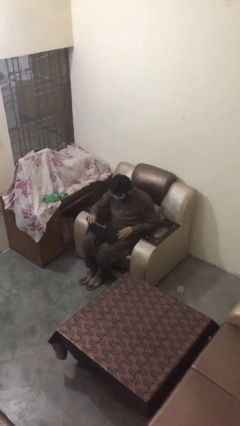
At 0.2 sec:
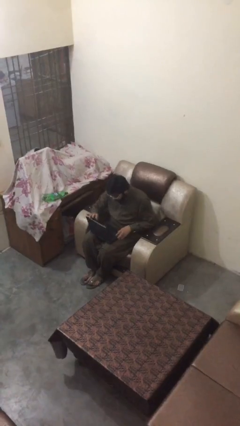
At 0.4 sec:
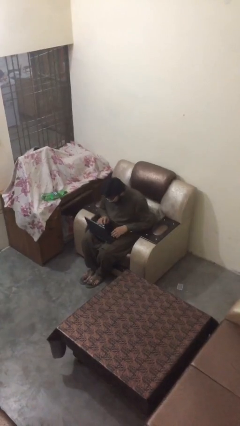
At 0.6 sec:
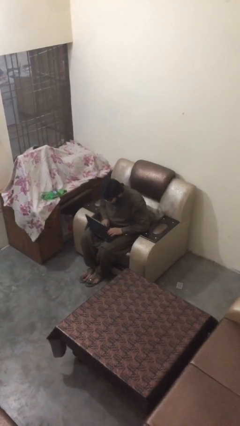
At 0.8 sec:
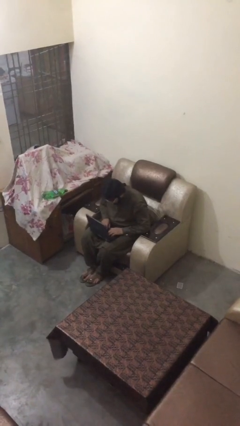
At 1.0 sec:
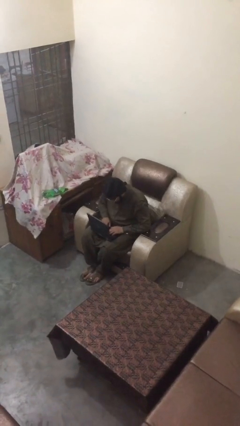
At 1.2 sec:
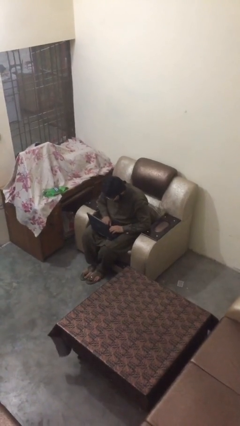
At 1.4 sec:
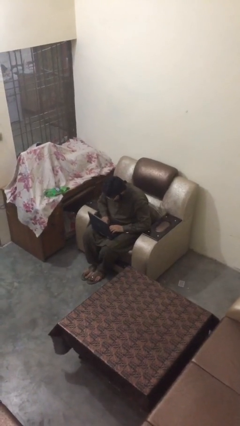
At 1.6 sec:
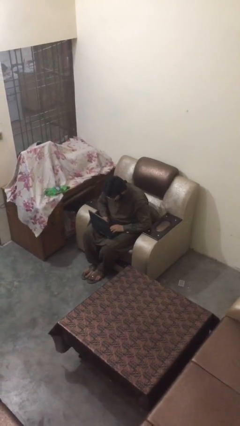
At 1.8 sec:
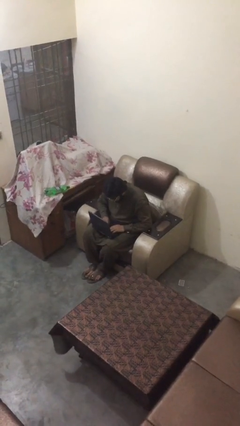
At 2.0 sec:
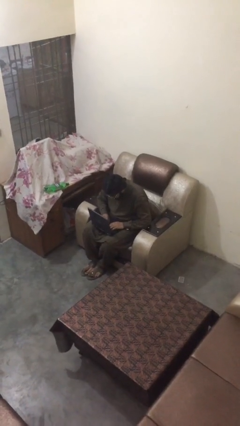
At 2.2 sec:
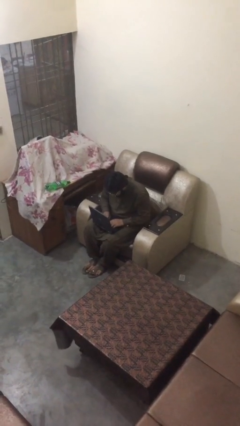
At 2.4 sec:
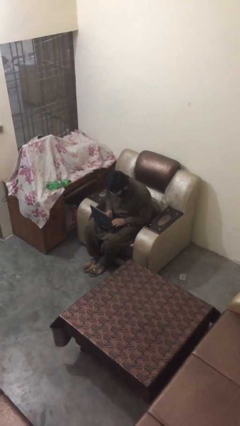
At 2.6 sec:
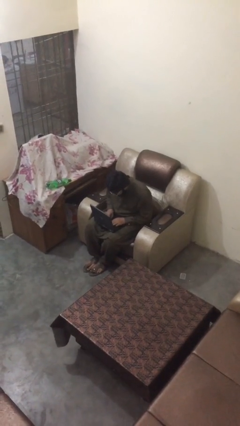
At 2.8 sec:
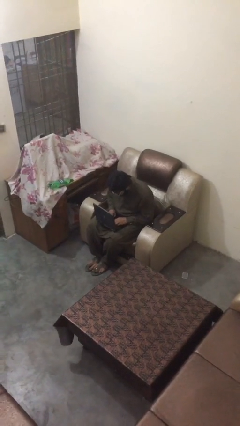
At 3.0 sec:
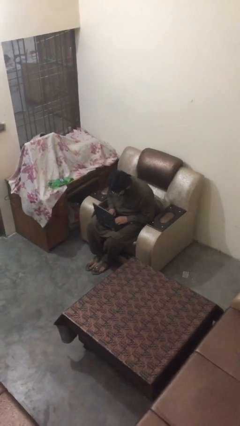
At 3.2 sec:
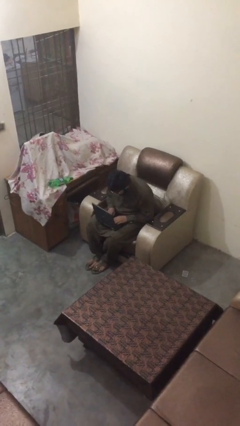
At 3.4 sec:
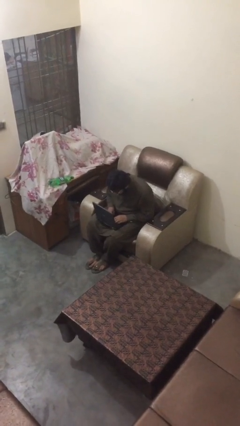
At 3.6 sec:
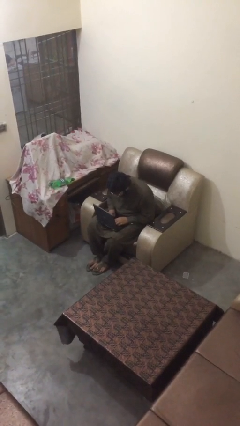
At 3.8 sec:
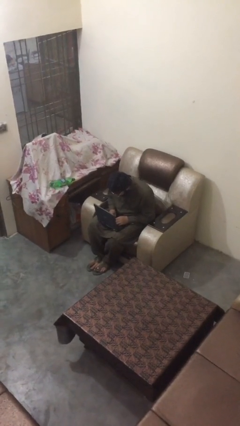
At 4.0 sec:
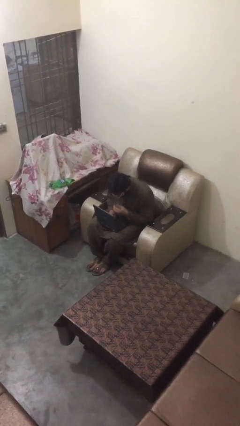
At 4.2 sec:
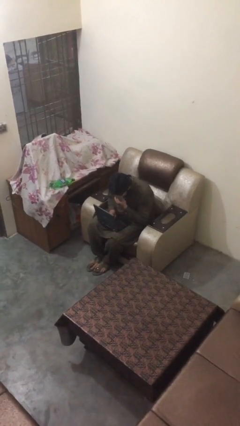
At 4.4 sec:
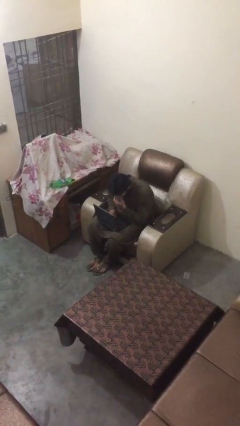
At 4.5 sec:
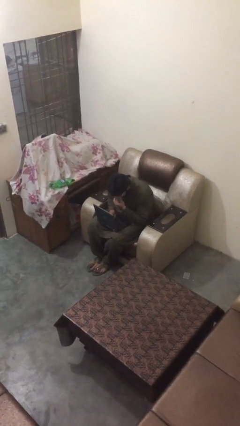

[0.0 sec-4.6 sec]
person interacts with laptop

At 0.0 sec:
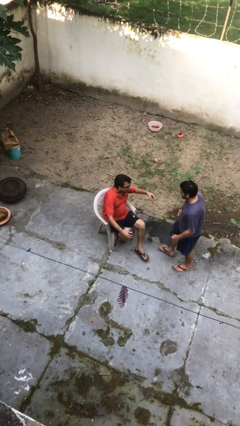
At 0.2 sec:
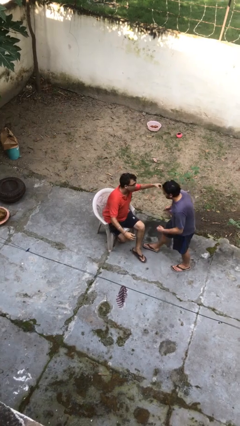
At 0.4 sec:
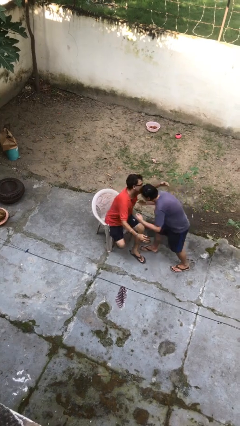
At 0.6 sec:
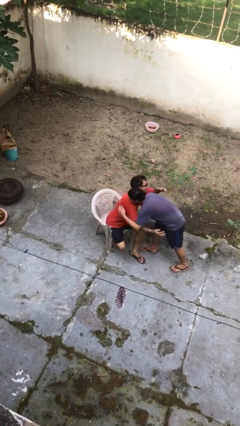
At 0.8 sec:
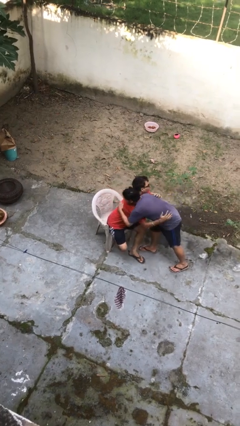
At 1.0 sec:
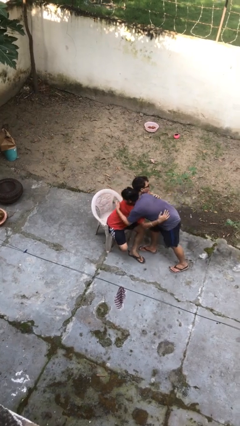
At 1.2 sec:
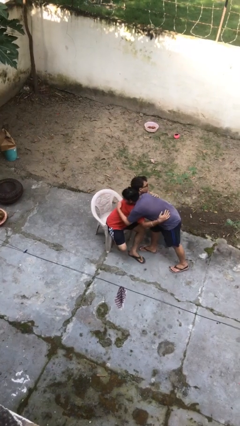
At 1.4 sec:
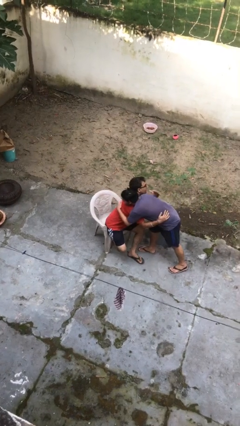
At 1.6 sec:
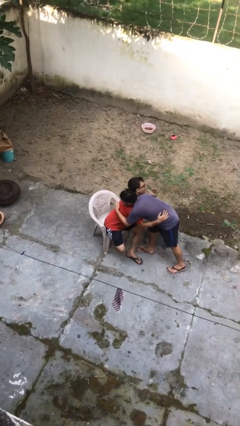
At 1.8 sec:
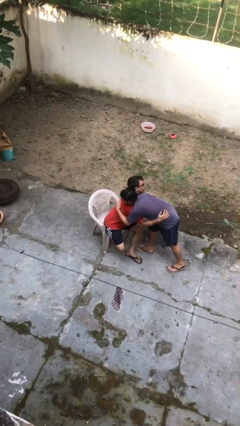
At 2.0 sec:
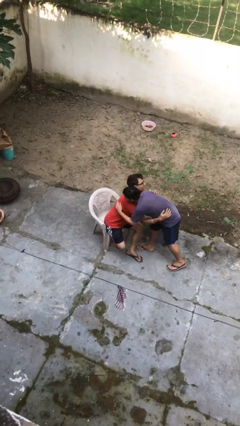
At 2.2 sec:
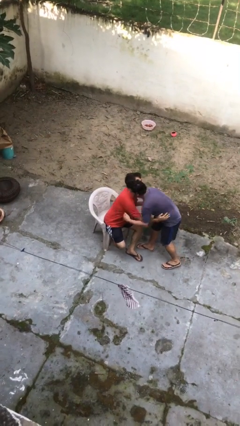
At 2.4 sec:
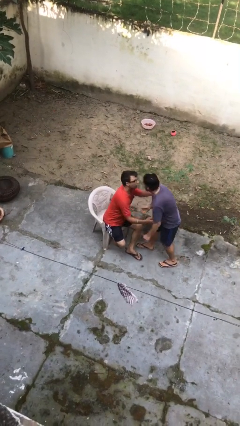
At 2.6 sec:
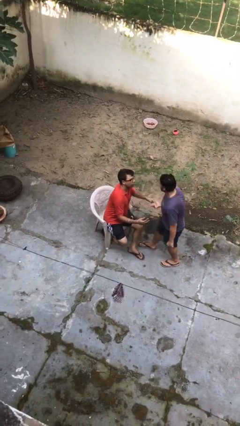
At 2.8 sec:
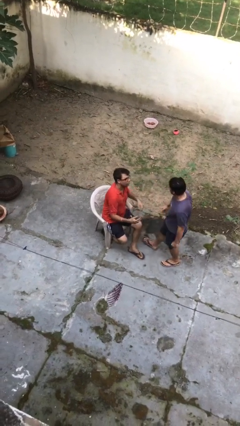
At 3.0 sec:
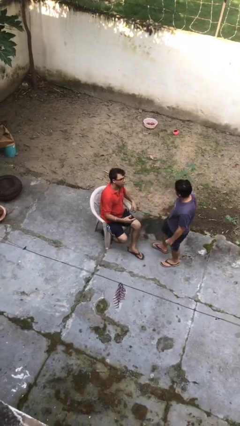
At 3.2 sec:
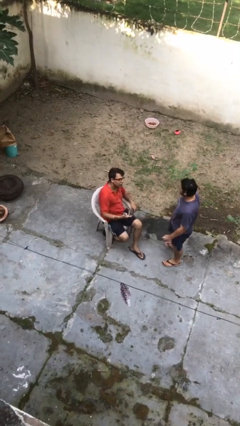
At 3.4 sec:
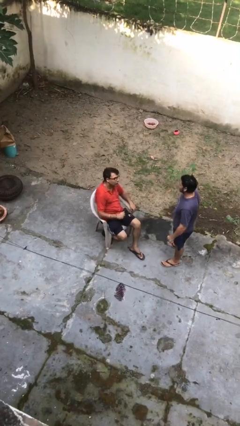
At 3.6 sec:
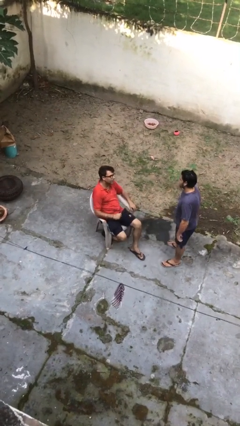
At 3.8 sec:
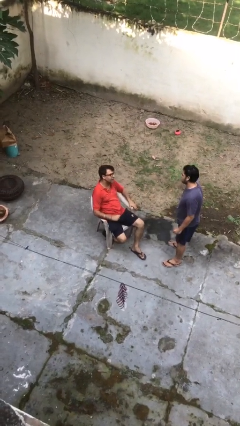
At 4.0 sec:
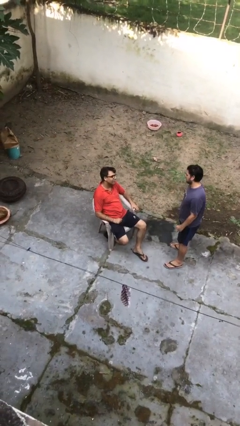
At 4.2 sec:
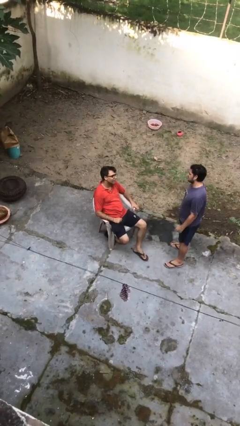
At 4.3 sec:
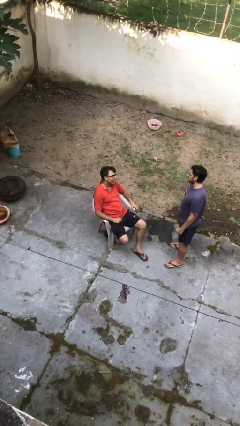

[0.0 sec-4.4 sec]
person embraces person

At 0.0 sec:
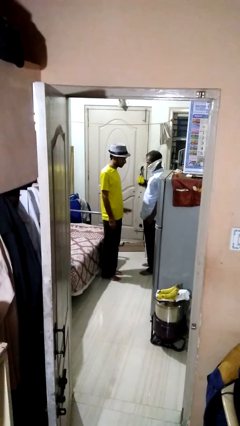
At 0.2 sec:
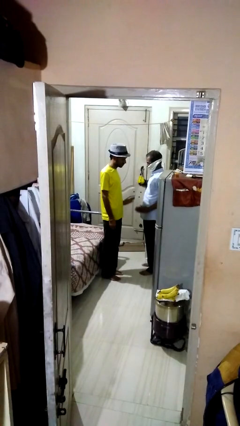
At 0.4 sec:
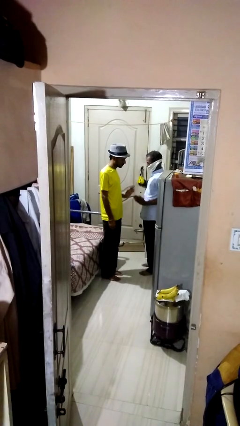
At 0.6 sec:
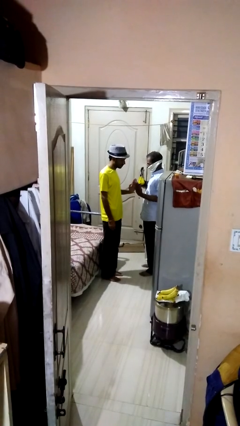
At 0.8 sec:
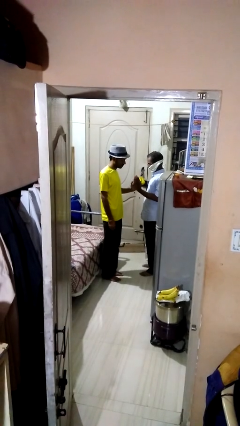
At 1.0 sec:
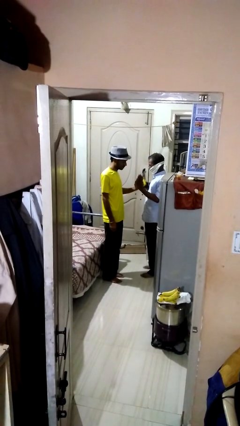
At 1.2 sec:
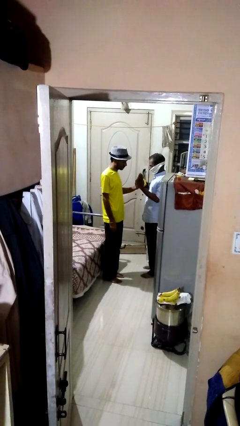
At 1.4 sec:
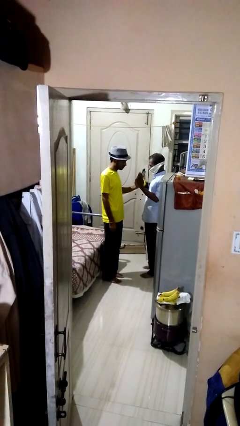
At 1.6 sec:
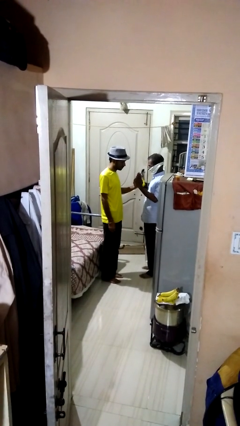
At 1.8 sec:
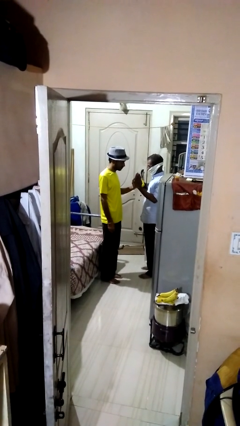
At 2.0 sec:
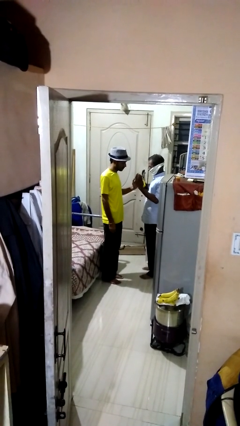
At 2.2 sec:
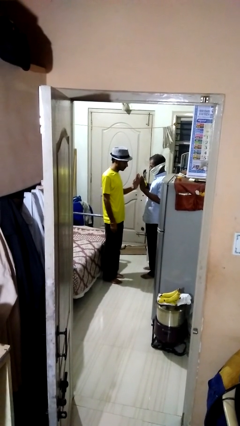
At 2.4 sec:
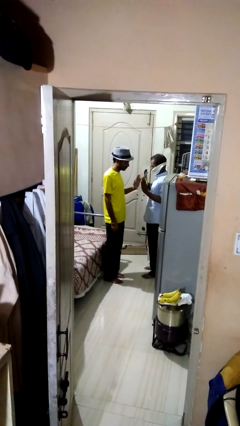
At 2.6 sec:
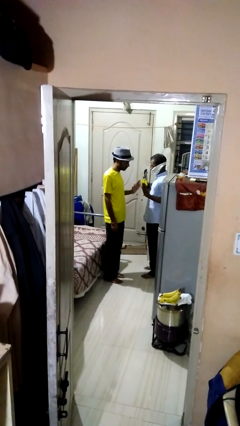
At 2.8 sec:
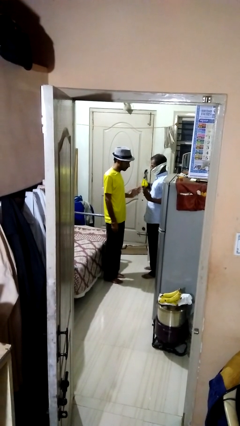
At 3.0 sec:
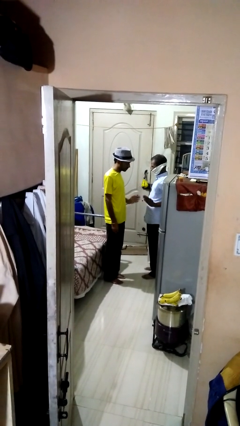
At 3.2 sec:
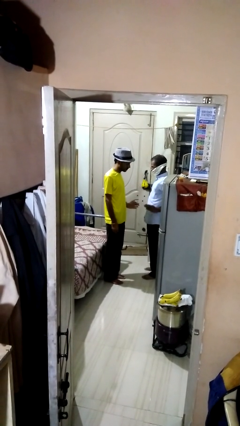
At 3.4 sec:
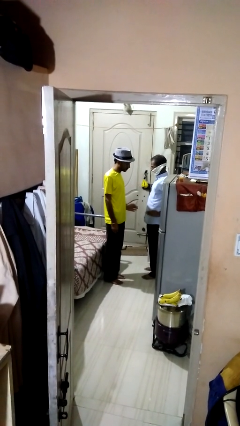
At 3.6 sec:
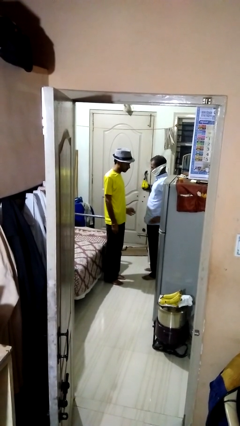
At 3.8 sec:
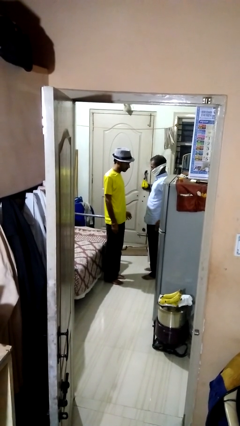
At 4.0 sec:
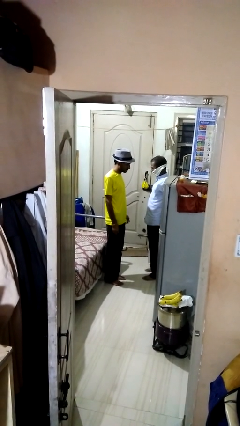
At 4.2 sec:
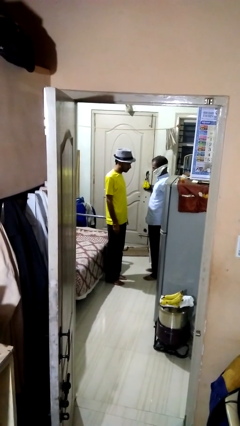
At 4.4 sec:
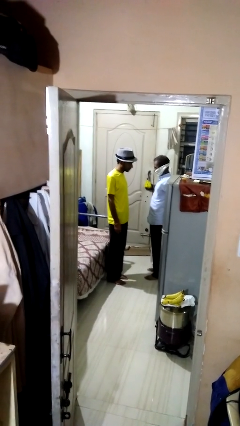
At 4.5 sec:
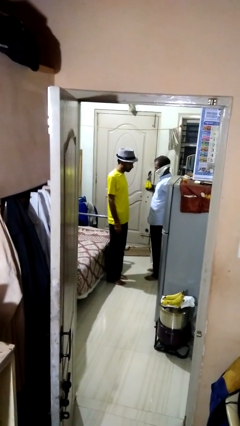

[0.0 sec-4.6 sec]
person highfives hand

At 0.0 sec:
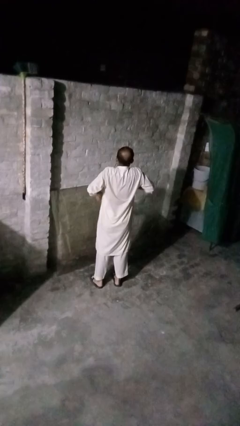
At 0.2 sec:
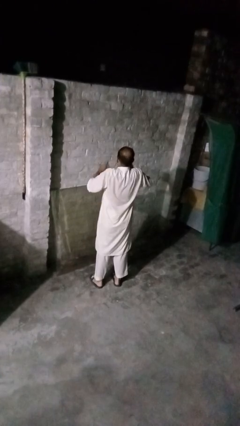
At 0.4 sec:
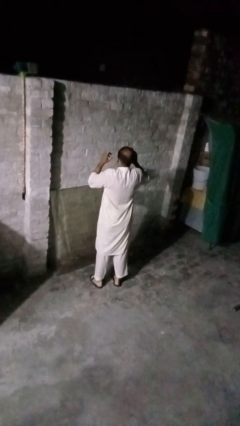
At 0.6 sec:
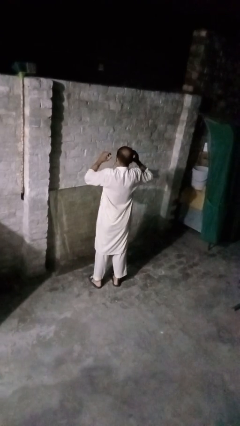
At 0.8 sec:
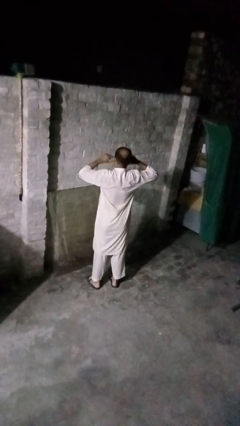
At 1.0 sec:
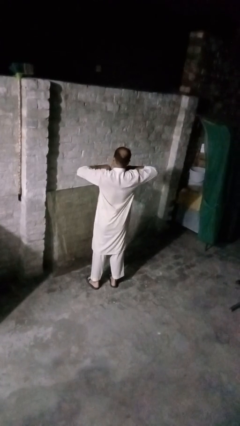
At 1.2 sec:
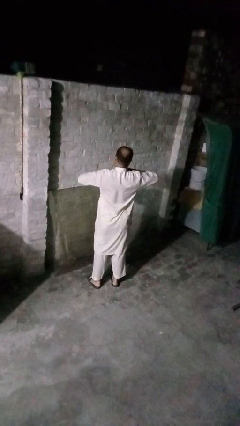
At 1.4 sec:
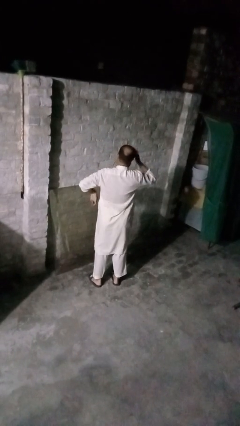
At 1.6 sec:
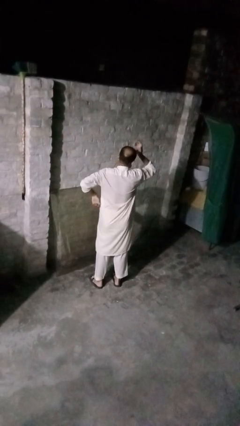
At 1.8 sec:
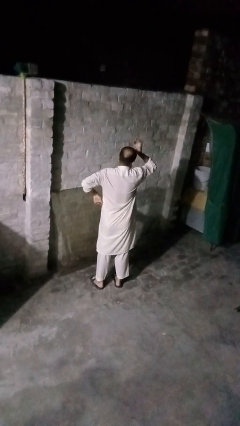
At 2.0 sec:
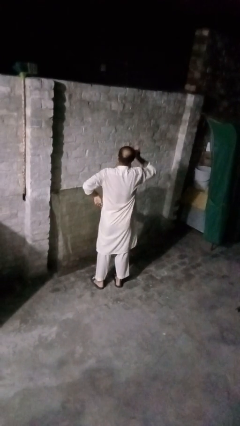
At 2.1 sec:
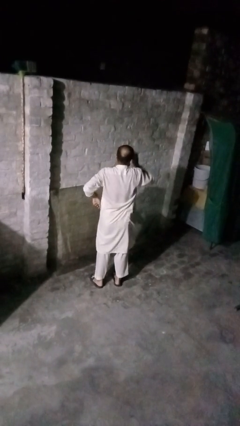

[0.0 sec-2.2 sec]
person shrugs

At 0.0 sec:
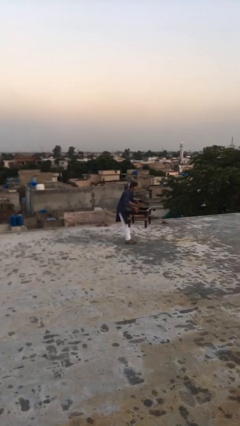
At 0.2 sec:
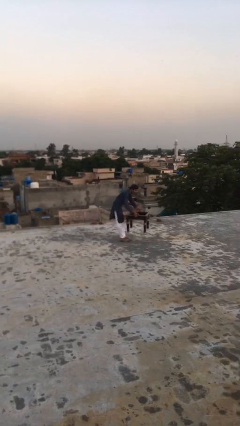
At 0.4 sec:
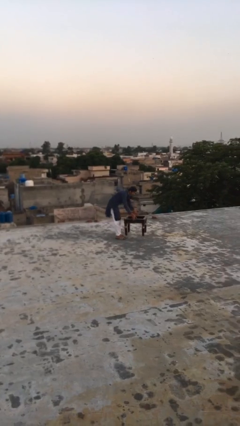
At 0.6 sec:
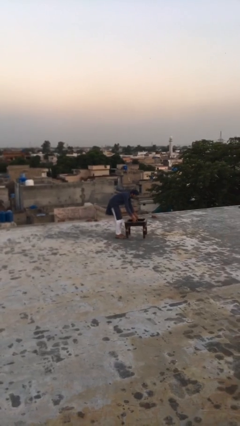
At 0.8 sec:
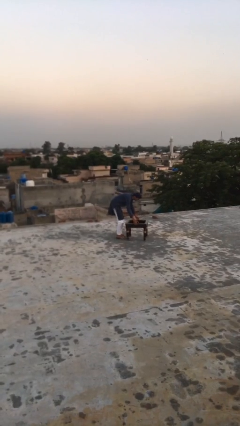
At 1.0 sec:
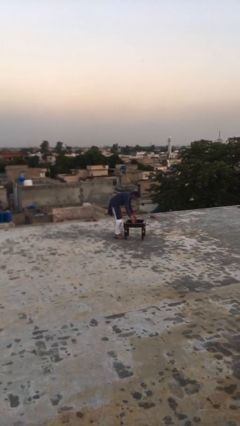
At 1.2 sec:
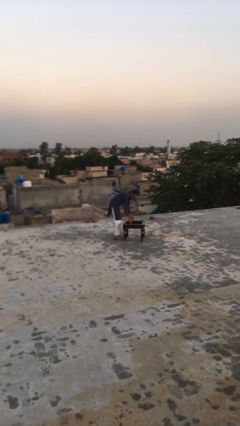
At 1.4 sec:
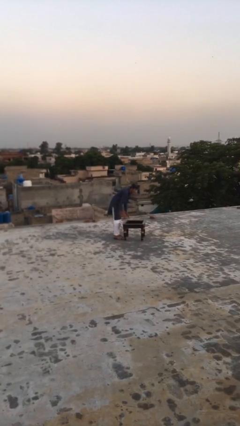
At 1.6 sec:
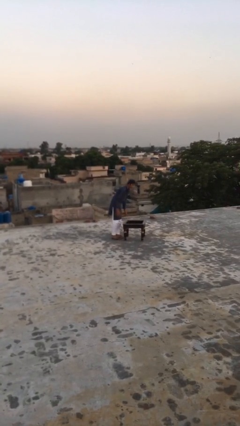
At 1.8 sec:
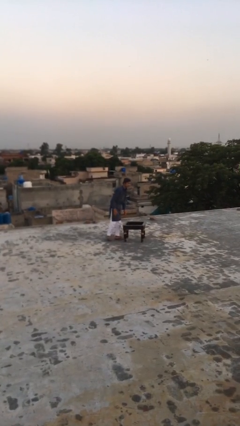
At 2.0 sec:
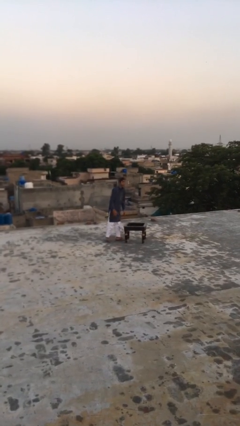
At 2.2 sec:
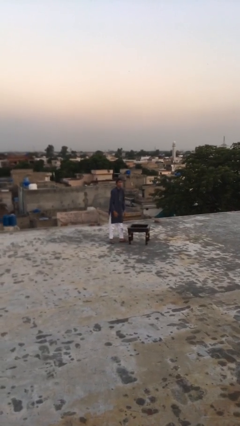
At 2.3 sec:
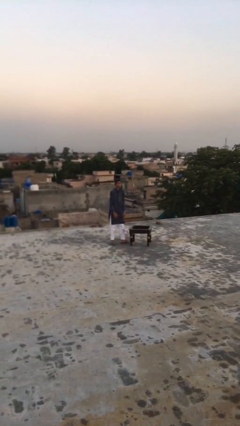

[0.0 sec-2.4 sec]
person puts down object on floor
